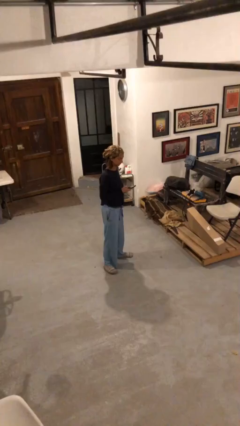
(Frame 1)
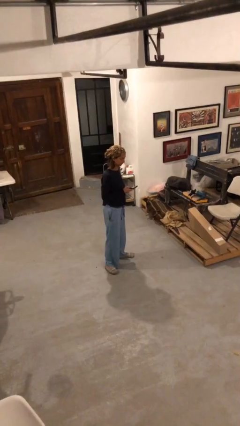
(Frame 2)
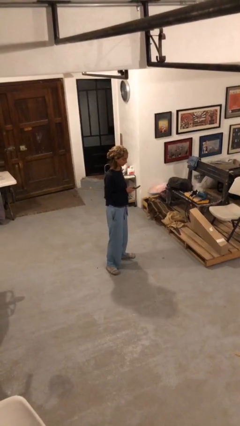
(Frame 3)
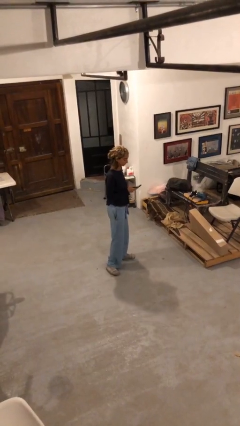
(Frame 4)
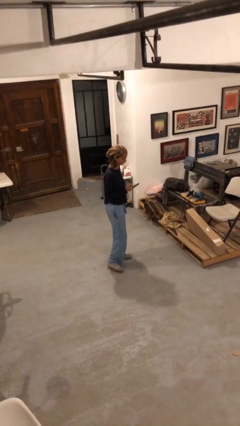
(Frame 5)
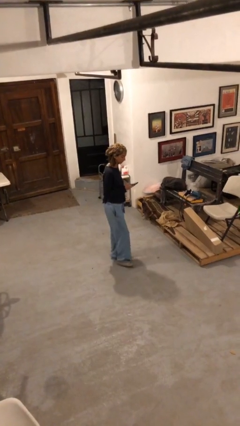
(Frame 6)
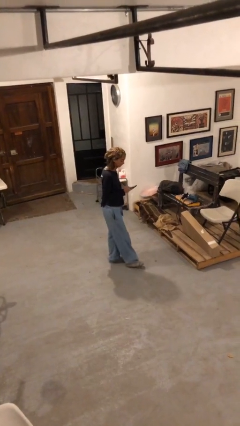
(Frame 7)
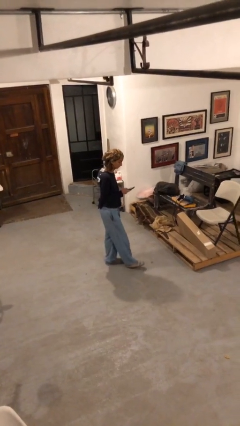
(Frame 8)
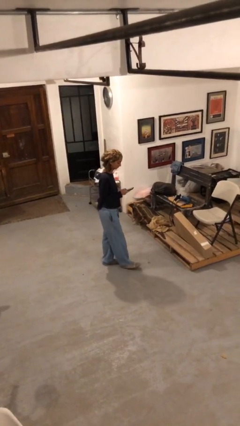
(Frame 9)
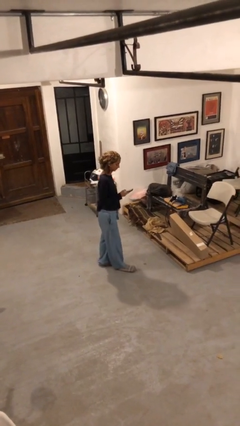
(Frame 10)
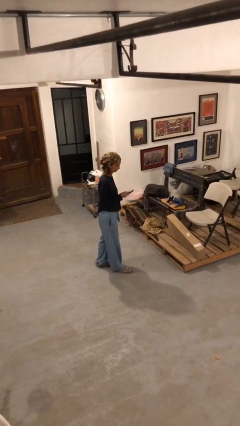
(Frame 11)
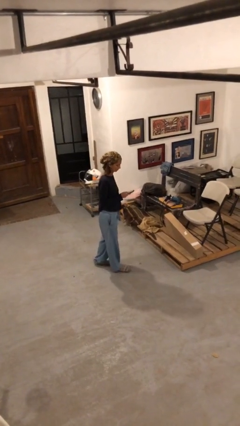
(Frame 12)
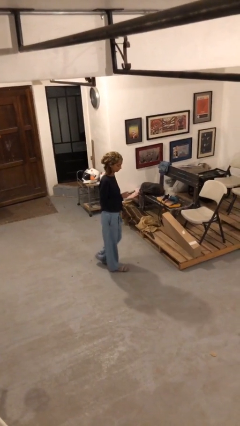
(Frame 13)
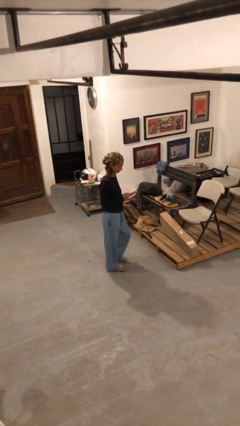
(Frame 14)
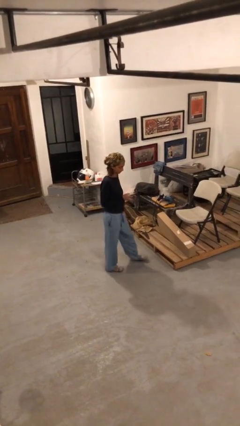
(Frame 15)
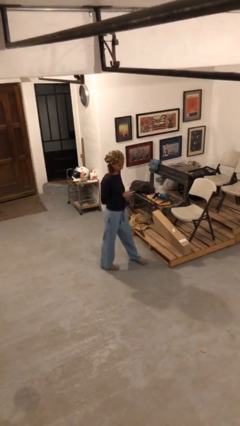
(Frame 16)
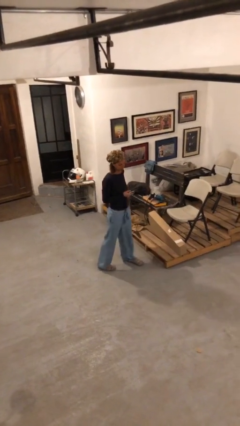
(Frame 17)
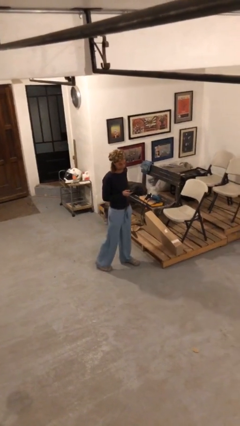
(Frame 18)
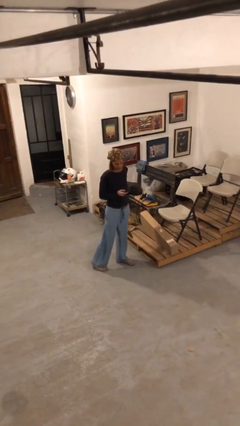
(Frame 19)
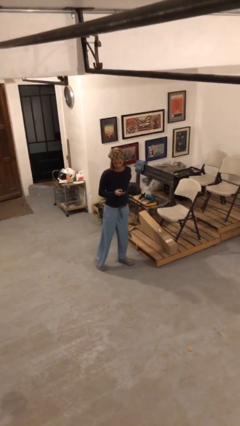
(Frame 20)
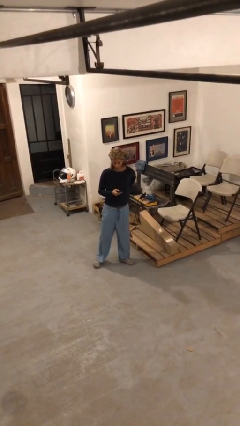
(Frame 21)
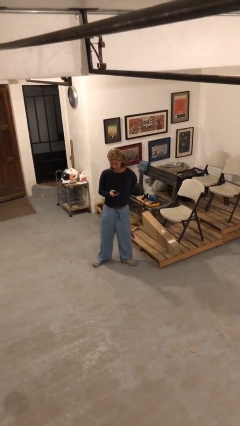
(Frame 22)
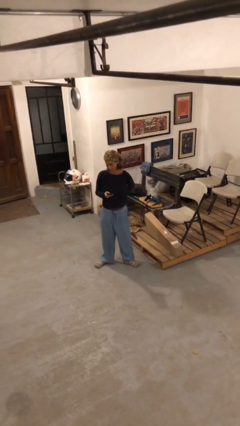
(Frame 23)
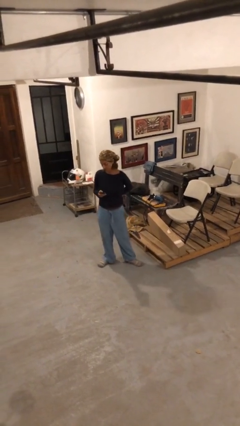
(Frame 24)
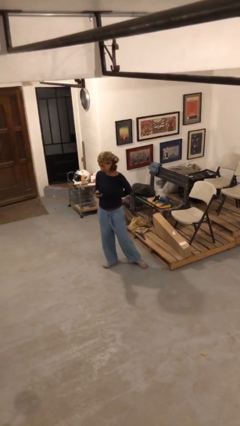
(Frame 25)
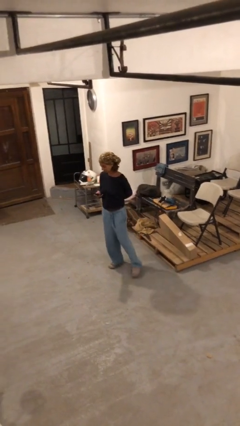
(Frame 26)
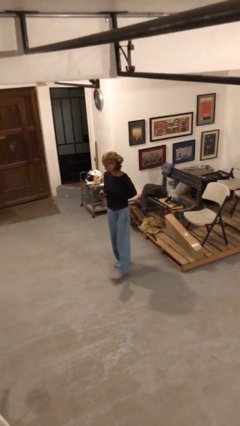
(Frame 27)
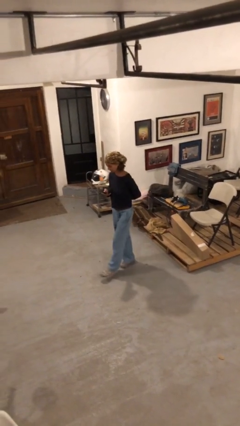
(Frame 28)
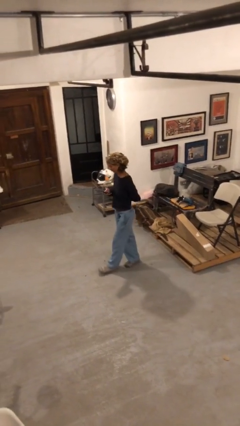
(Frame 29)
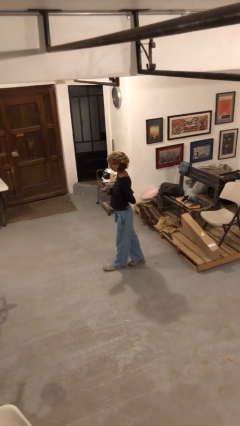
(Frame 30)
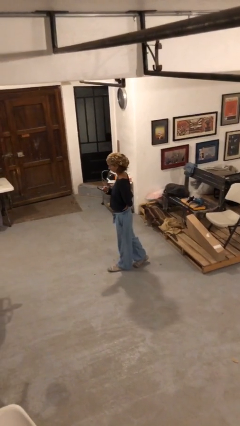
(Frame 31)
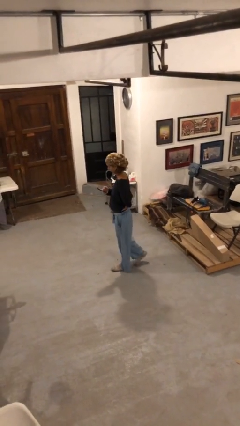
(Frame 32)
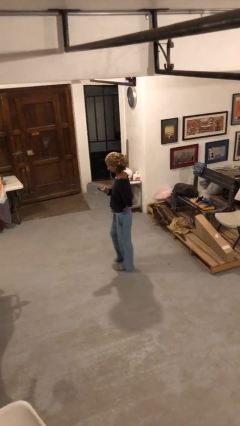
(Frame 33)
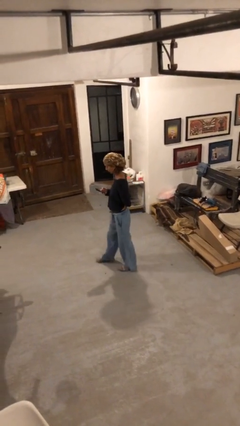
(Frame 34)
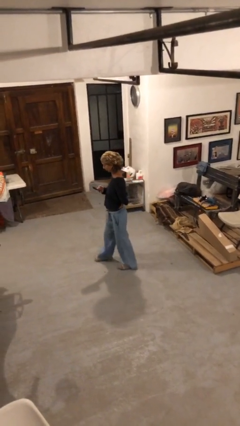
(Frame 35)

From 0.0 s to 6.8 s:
person texts on phone

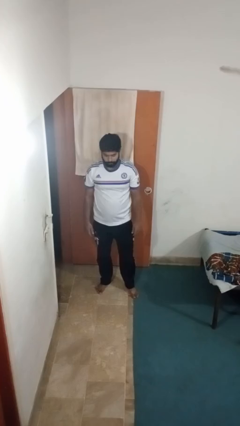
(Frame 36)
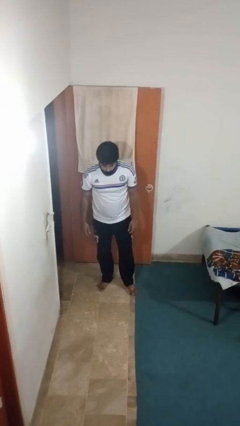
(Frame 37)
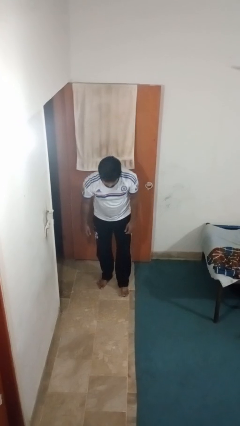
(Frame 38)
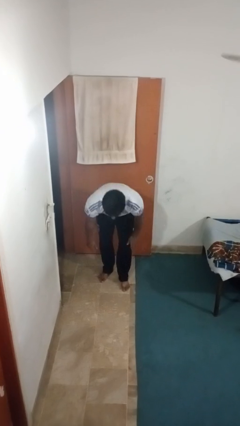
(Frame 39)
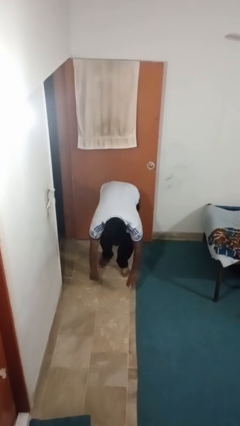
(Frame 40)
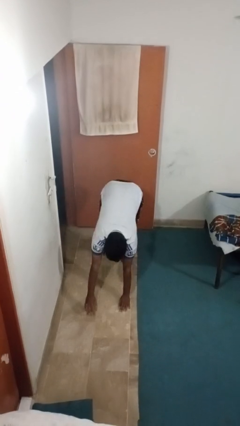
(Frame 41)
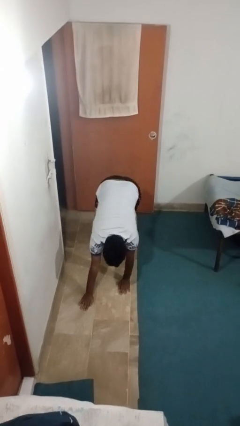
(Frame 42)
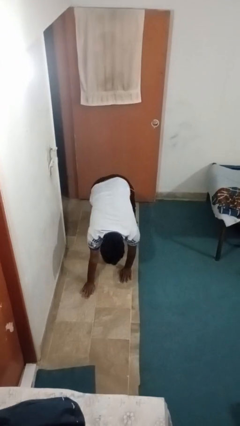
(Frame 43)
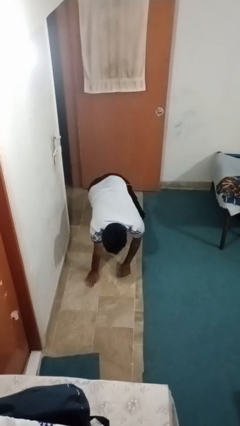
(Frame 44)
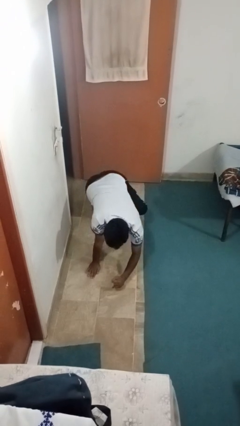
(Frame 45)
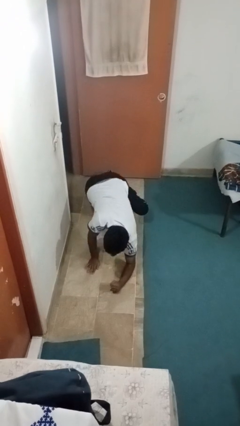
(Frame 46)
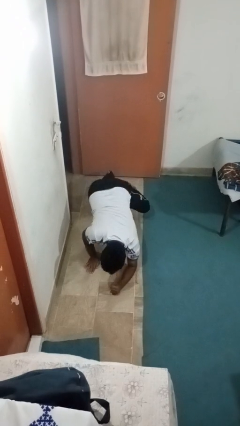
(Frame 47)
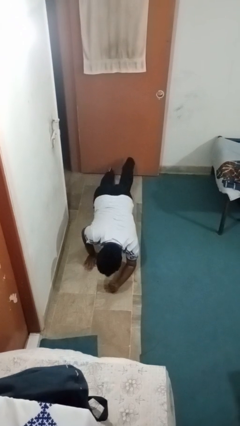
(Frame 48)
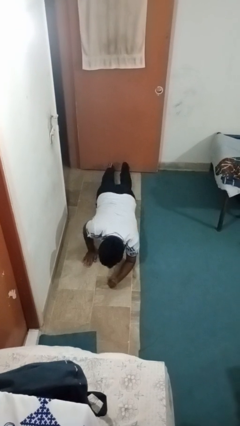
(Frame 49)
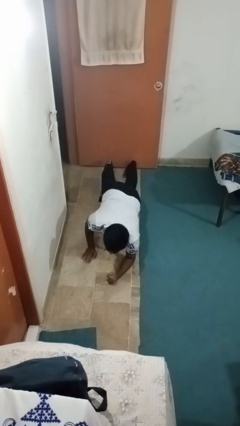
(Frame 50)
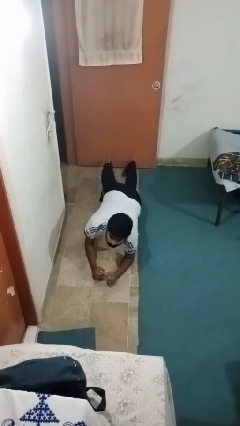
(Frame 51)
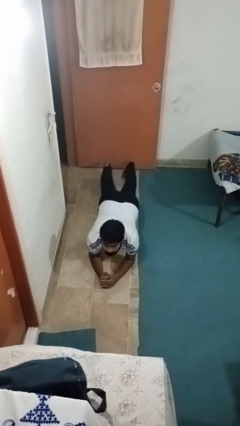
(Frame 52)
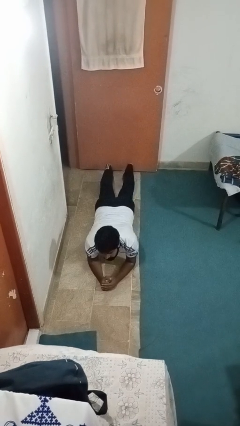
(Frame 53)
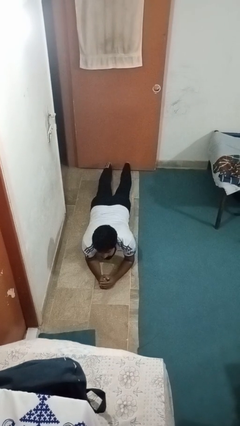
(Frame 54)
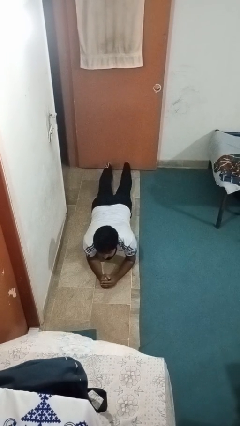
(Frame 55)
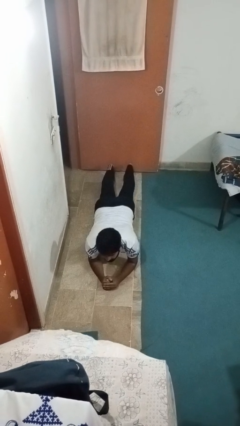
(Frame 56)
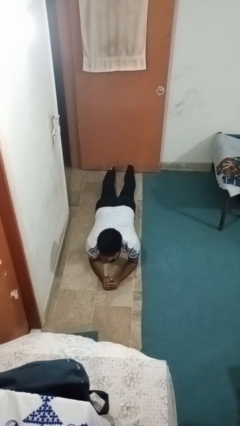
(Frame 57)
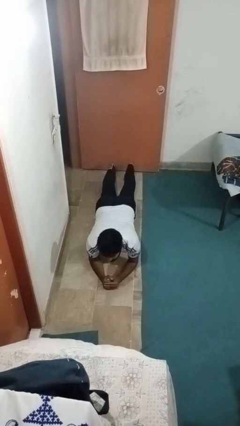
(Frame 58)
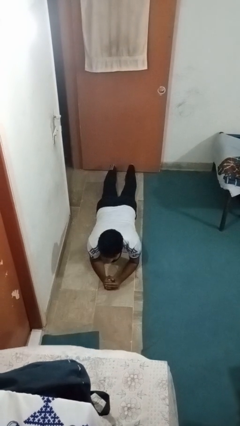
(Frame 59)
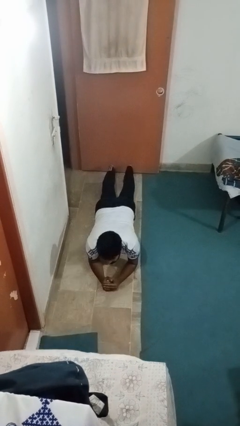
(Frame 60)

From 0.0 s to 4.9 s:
person exercises with plank

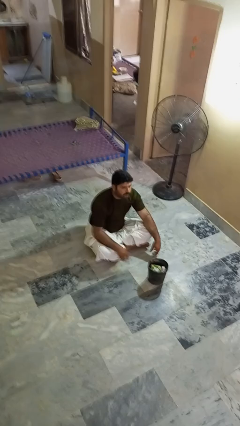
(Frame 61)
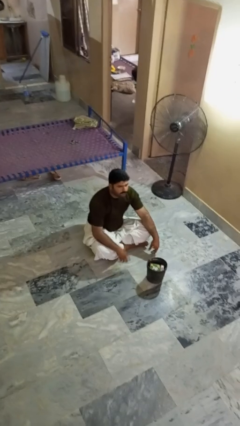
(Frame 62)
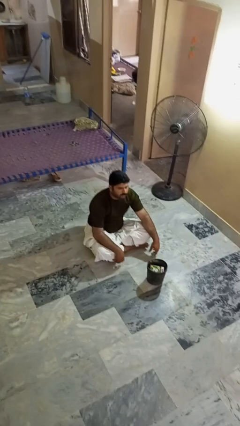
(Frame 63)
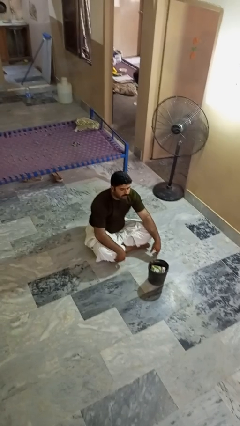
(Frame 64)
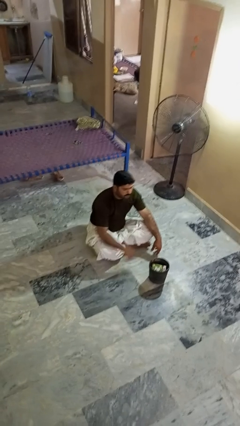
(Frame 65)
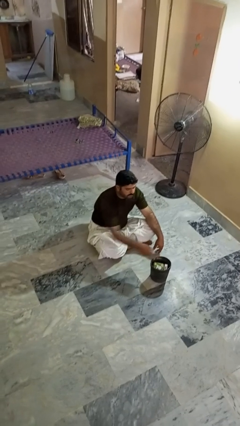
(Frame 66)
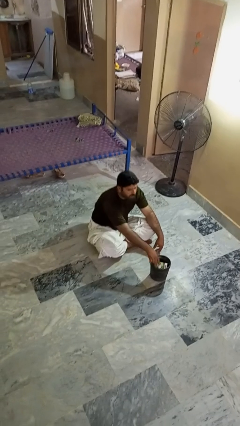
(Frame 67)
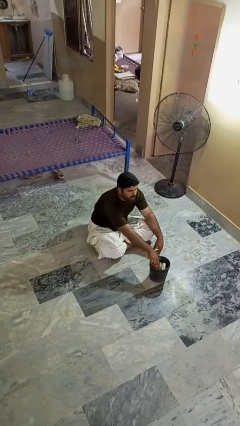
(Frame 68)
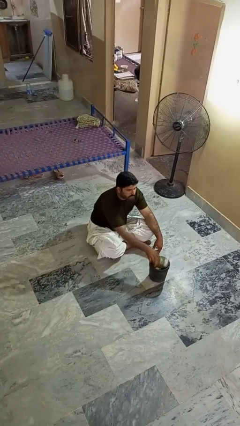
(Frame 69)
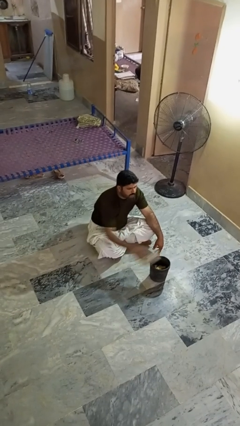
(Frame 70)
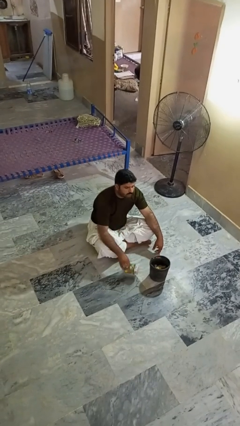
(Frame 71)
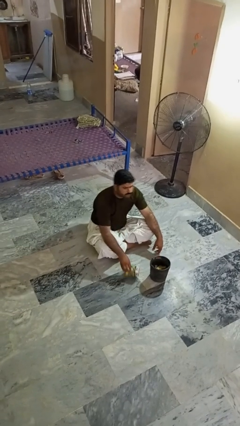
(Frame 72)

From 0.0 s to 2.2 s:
person takes object from basket

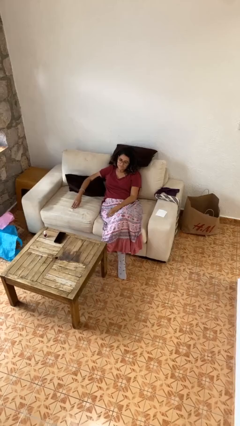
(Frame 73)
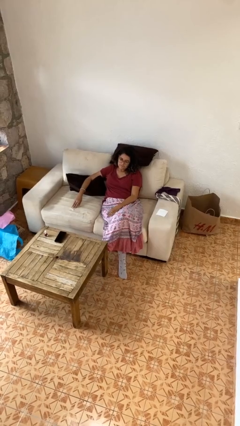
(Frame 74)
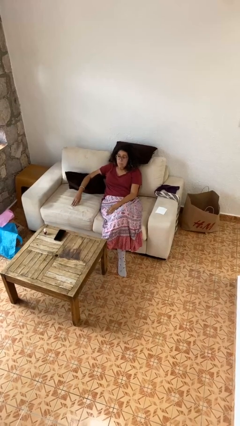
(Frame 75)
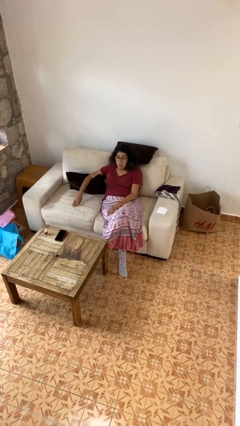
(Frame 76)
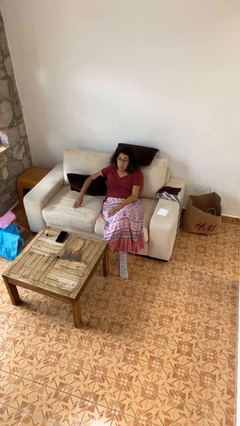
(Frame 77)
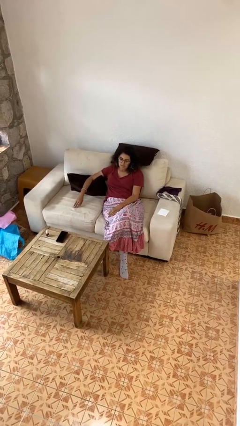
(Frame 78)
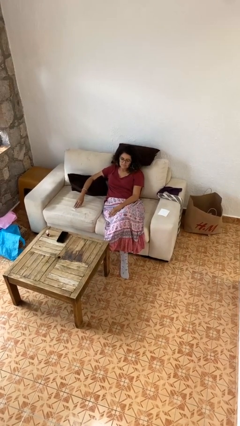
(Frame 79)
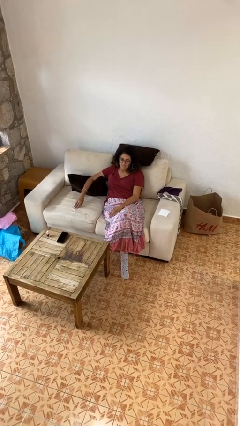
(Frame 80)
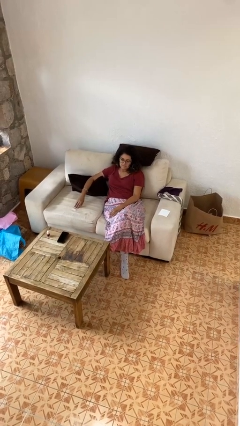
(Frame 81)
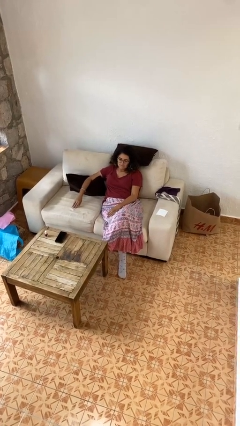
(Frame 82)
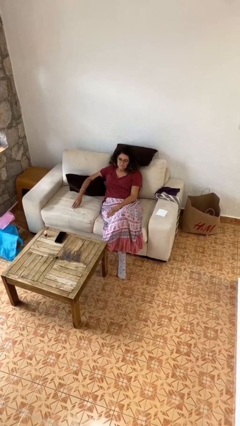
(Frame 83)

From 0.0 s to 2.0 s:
person sticks out tongue

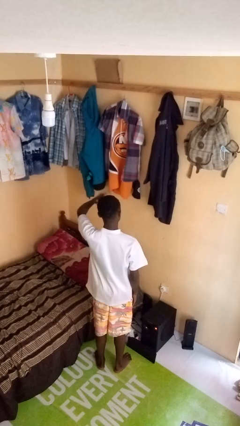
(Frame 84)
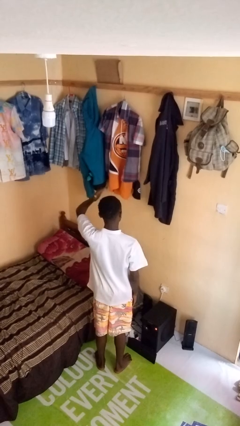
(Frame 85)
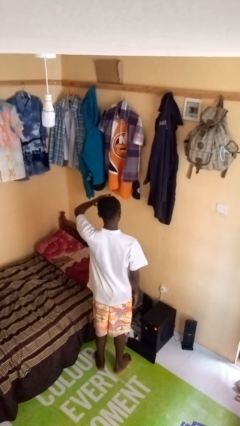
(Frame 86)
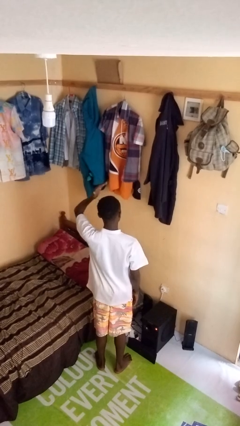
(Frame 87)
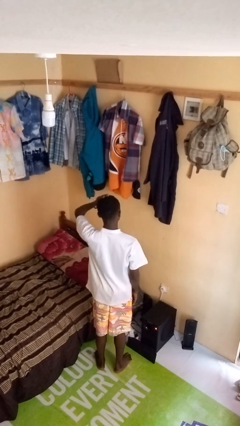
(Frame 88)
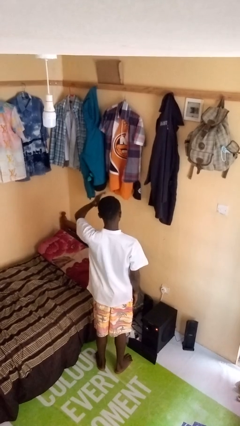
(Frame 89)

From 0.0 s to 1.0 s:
person pats head

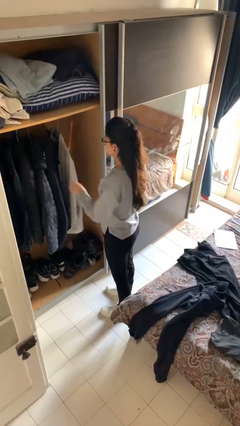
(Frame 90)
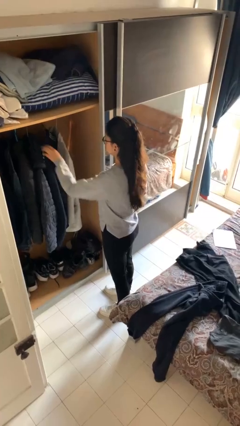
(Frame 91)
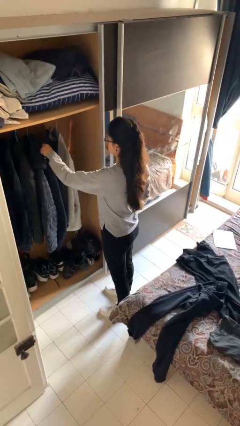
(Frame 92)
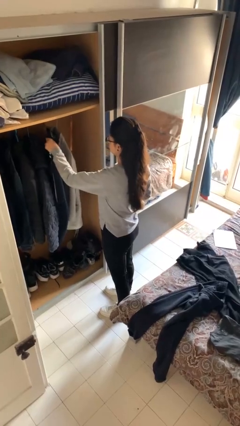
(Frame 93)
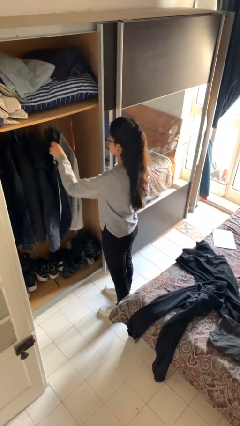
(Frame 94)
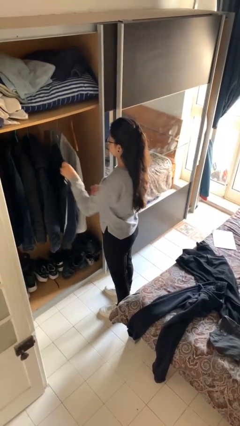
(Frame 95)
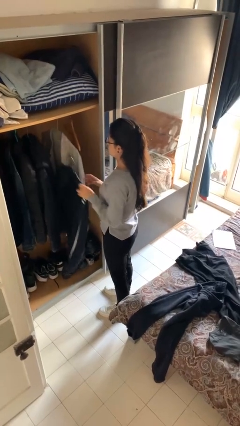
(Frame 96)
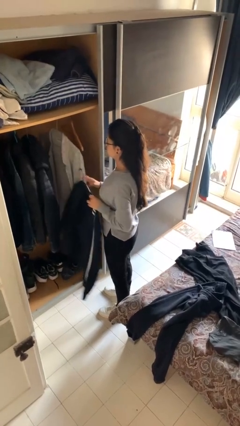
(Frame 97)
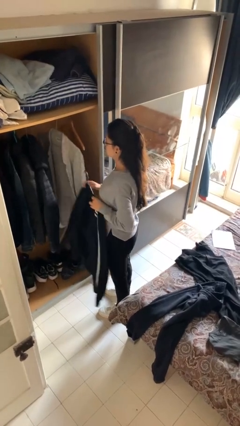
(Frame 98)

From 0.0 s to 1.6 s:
person takes clothes from closet
